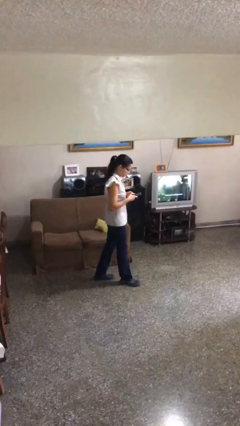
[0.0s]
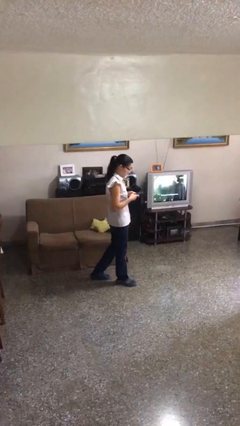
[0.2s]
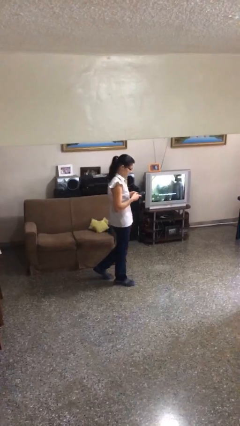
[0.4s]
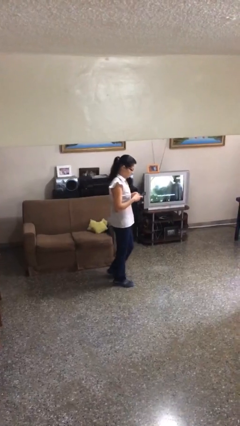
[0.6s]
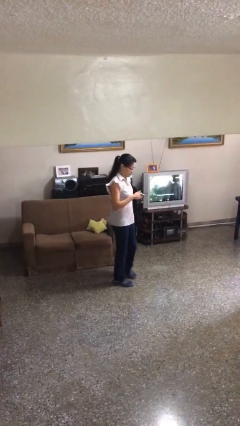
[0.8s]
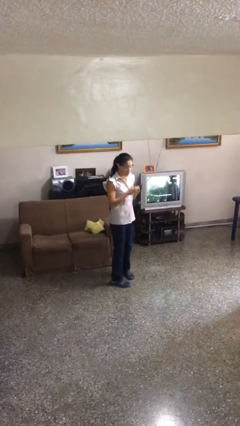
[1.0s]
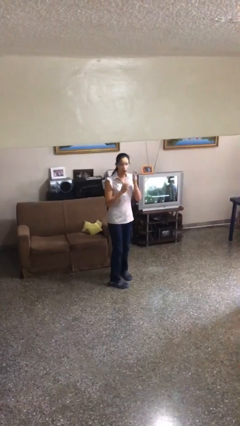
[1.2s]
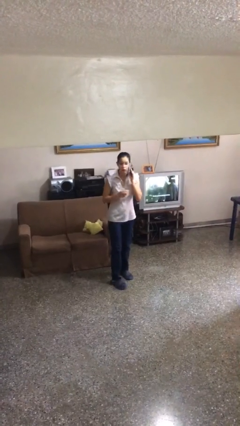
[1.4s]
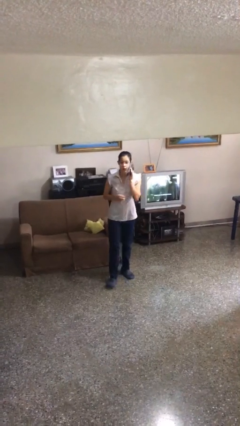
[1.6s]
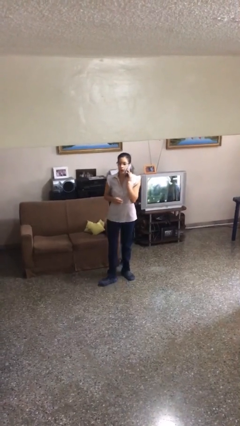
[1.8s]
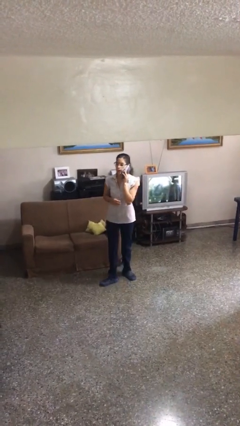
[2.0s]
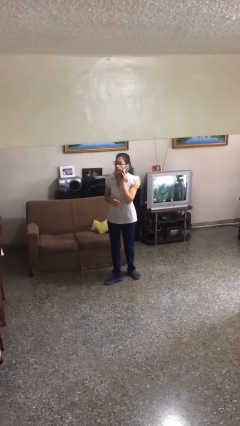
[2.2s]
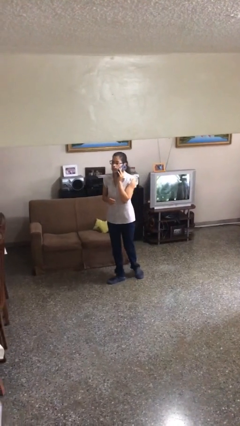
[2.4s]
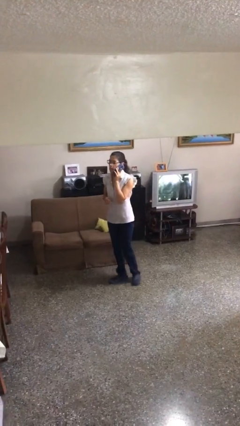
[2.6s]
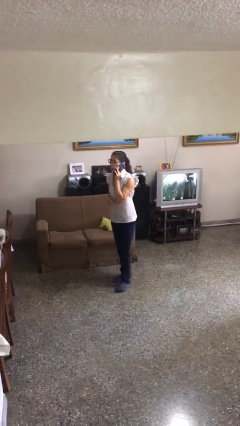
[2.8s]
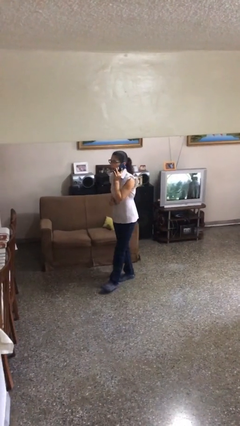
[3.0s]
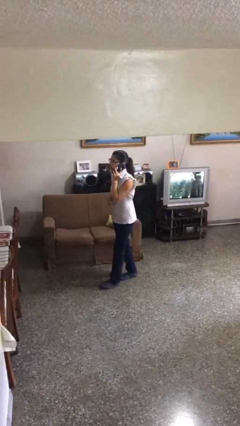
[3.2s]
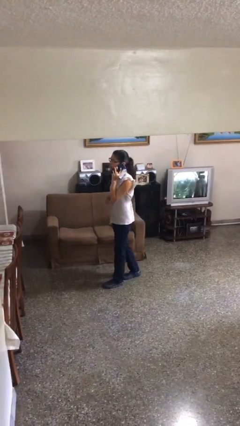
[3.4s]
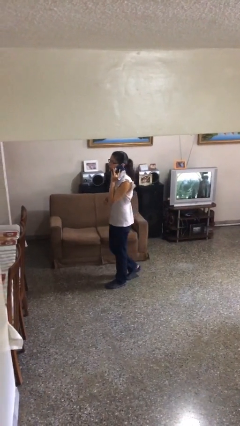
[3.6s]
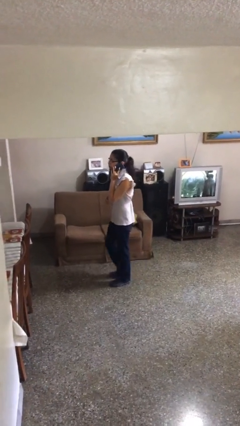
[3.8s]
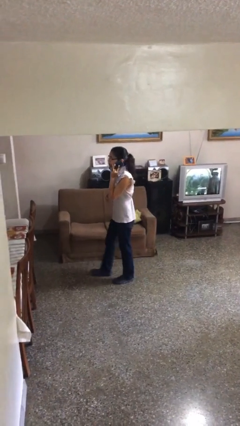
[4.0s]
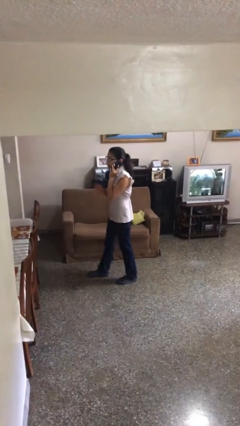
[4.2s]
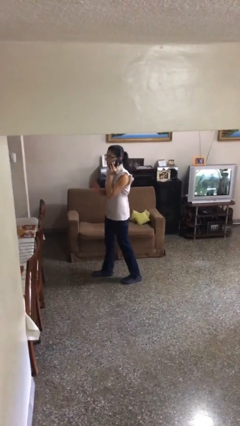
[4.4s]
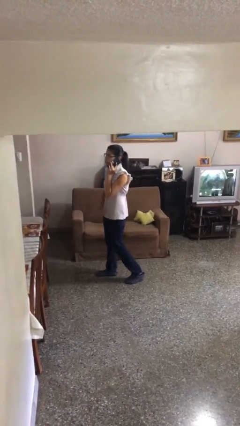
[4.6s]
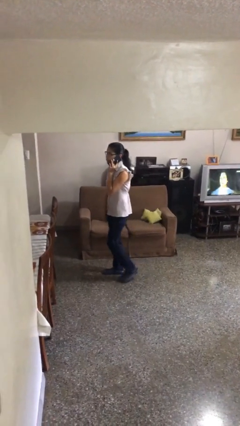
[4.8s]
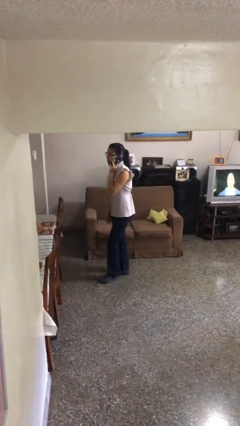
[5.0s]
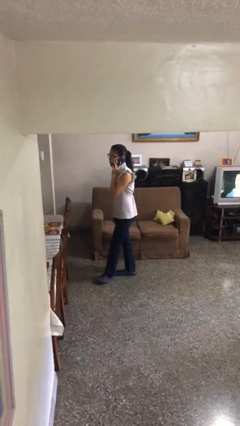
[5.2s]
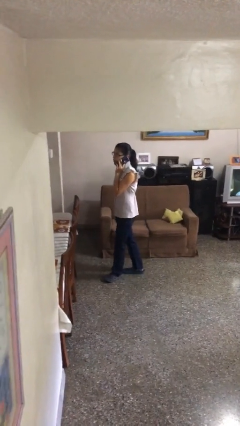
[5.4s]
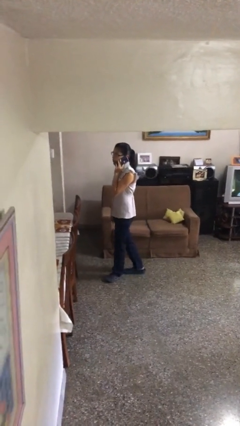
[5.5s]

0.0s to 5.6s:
person talks on phone

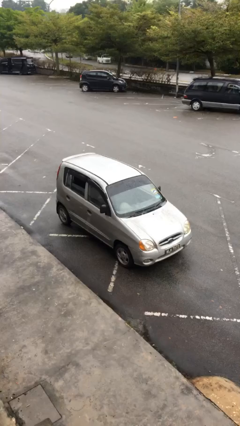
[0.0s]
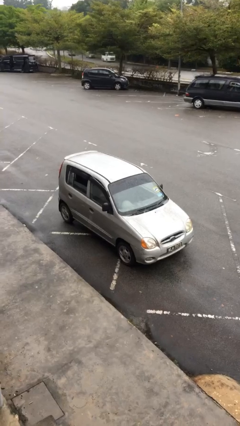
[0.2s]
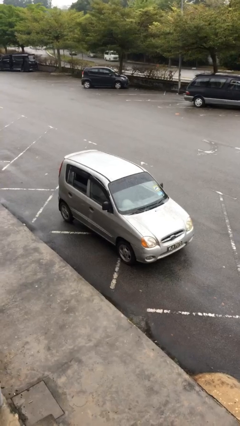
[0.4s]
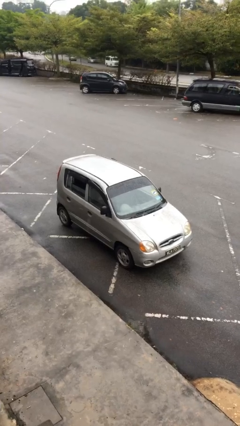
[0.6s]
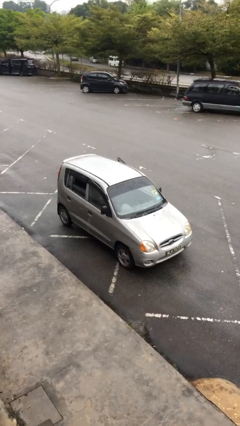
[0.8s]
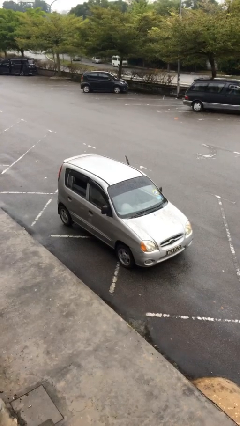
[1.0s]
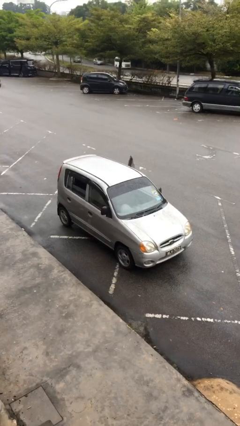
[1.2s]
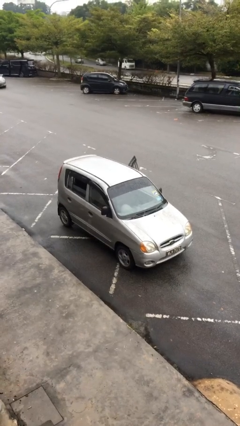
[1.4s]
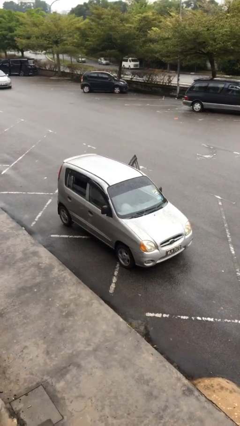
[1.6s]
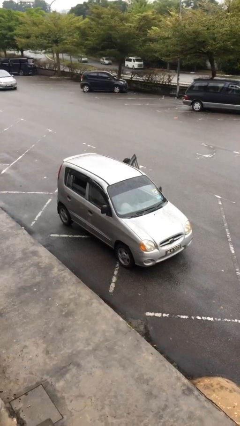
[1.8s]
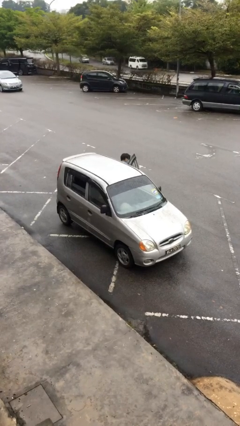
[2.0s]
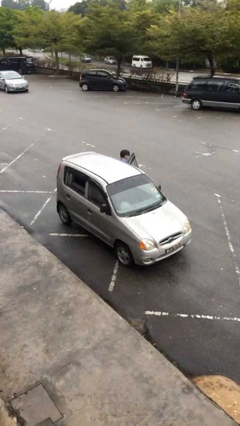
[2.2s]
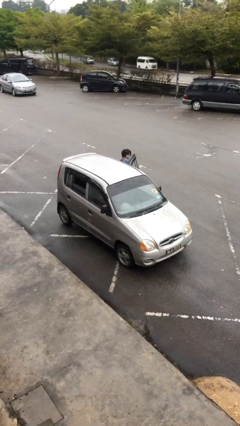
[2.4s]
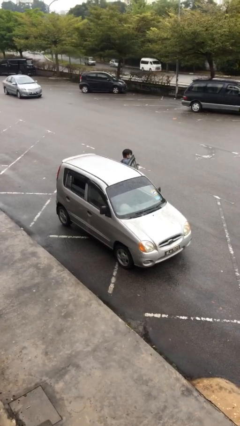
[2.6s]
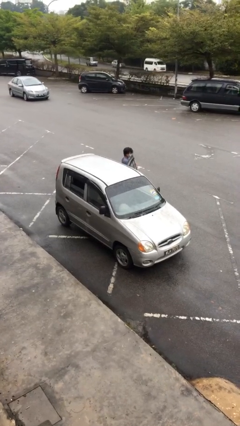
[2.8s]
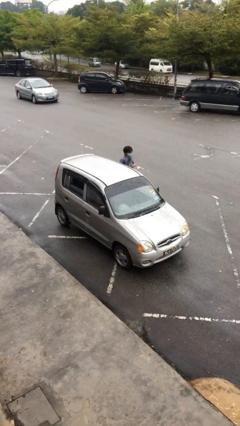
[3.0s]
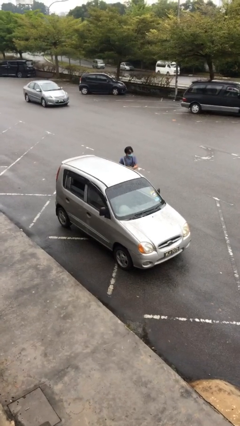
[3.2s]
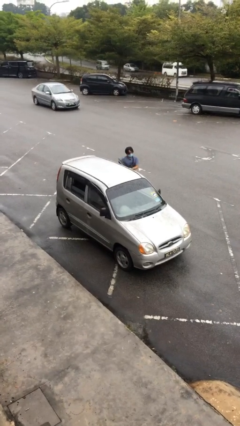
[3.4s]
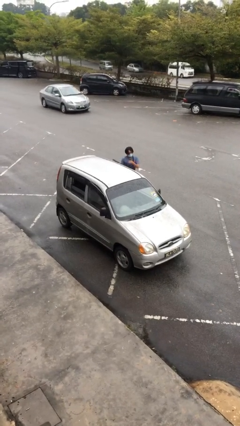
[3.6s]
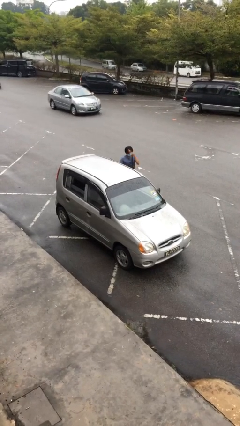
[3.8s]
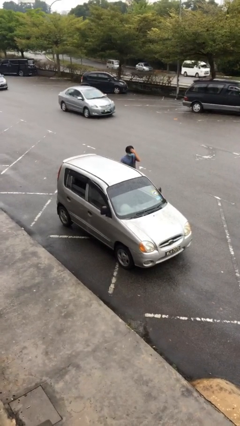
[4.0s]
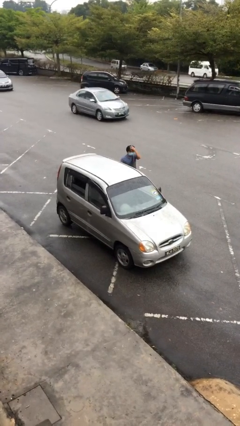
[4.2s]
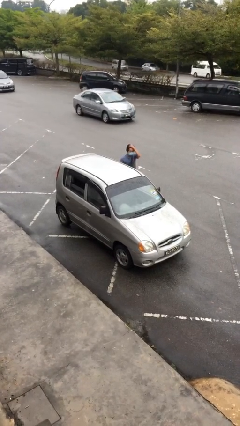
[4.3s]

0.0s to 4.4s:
car drops off person

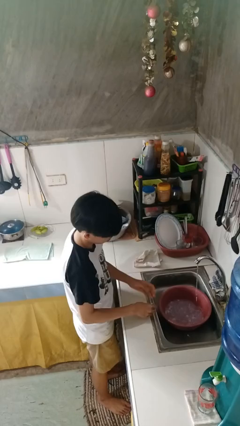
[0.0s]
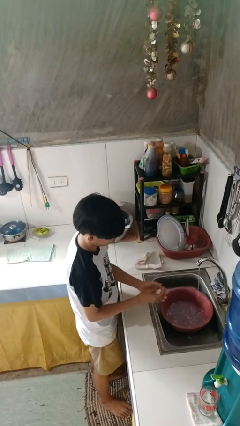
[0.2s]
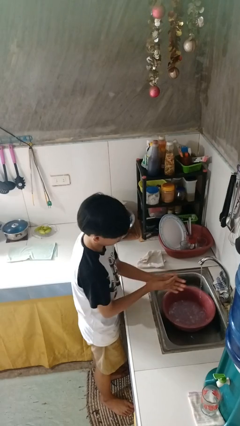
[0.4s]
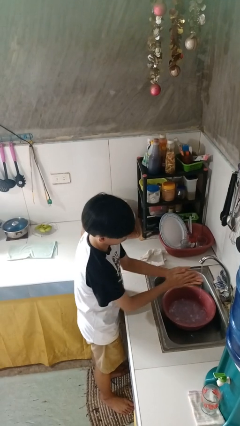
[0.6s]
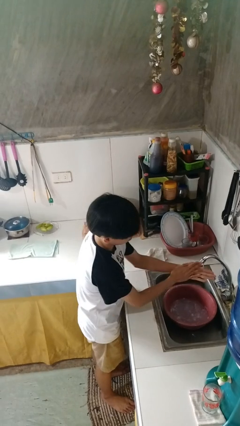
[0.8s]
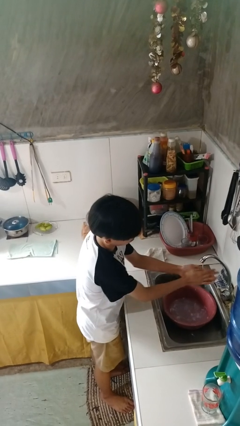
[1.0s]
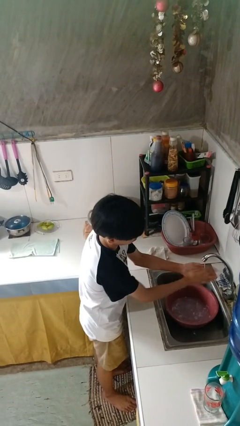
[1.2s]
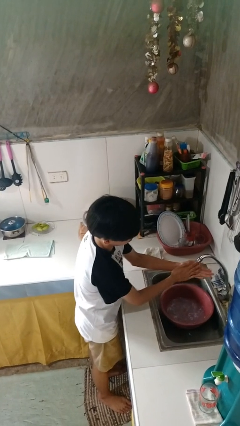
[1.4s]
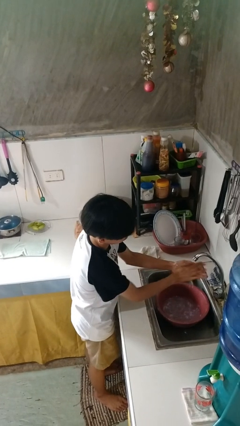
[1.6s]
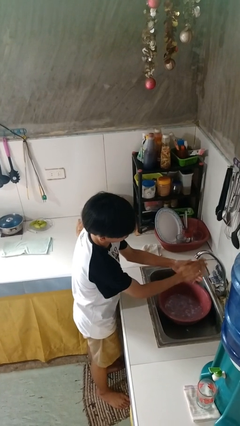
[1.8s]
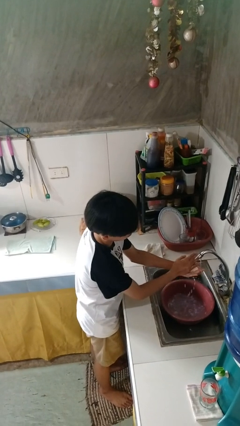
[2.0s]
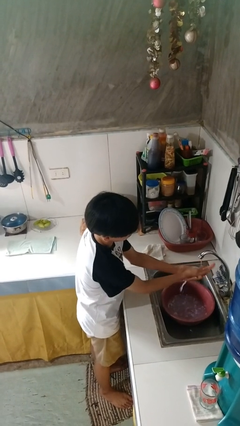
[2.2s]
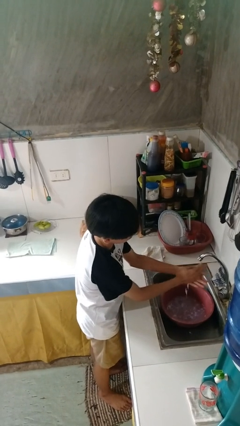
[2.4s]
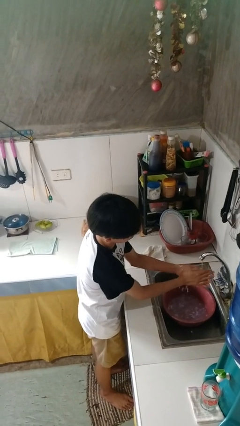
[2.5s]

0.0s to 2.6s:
person washes hands

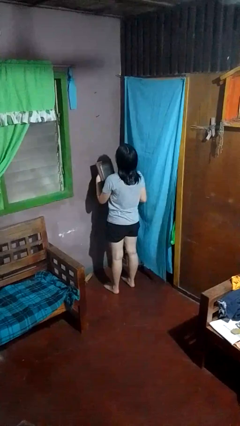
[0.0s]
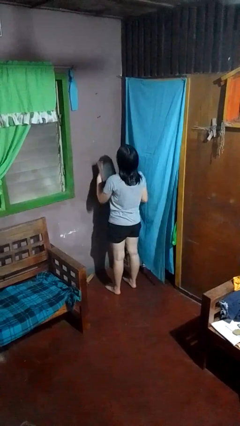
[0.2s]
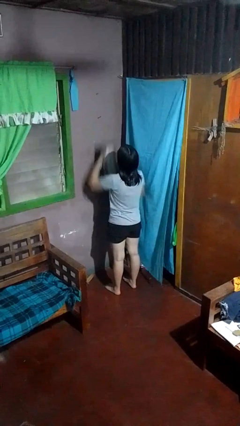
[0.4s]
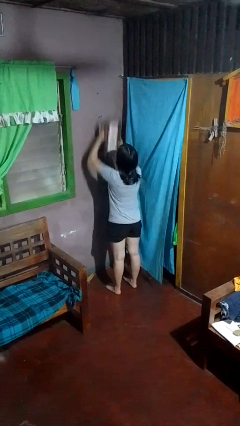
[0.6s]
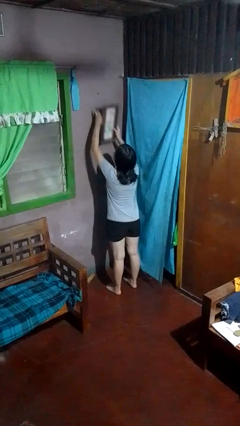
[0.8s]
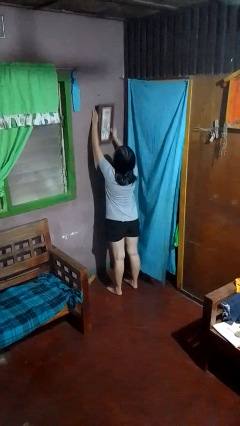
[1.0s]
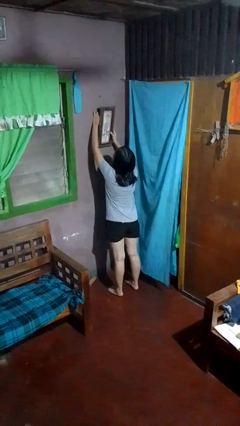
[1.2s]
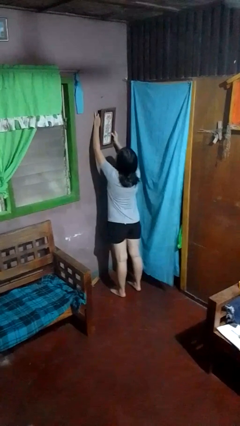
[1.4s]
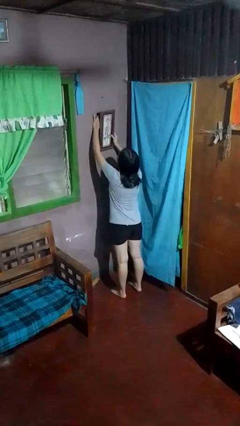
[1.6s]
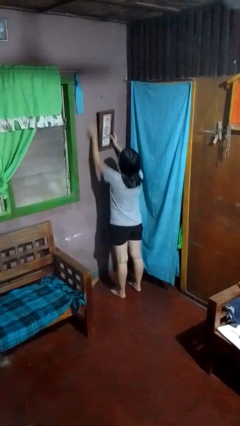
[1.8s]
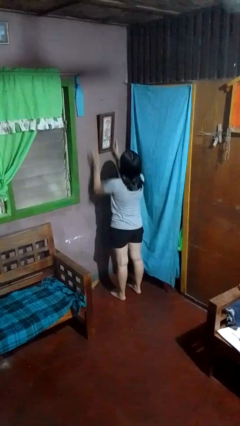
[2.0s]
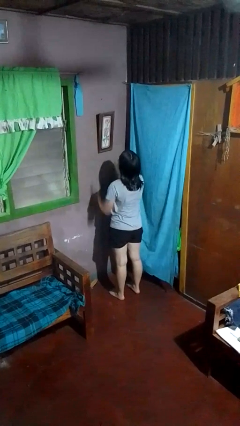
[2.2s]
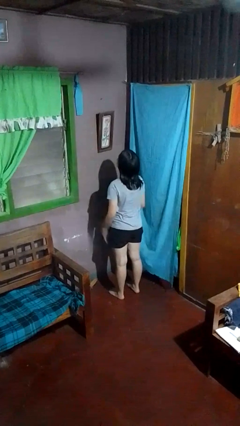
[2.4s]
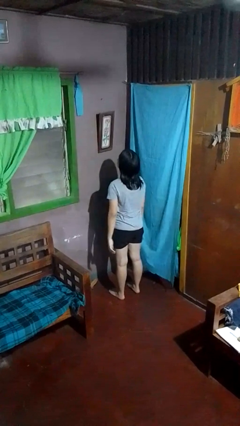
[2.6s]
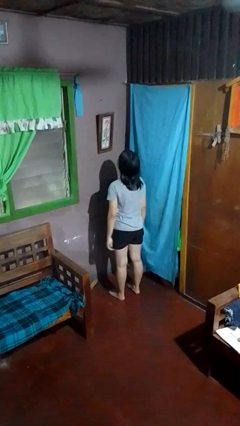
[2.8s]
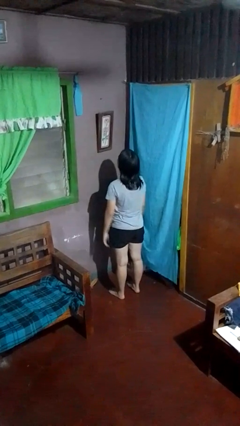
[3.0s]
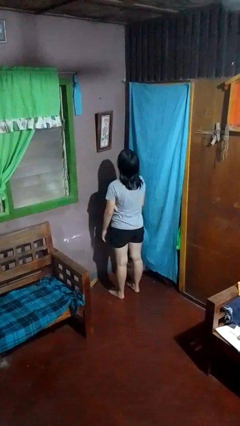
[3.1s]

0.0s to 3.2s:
person puts up picture frame

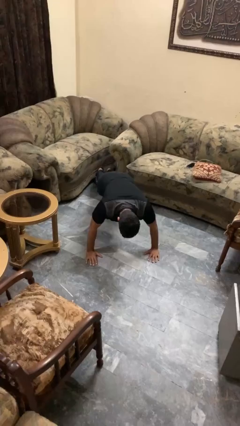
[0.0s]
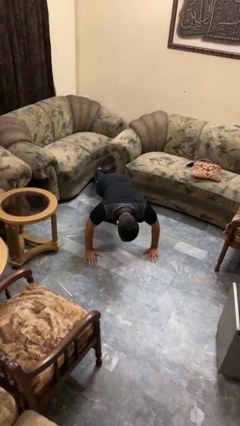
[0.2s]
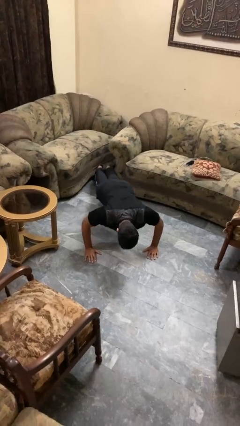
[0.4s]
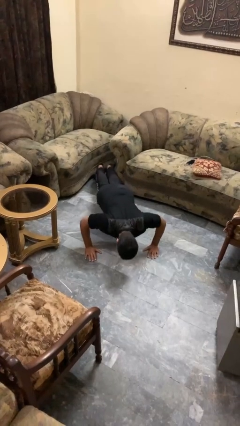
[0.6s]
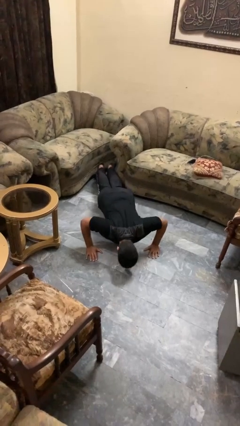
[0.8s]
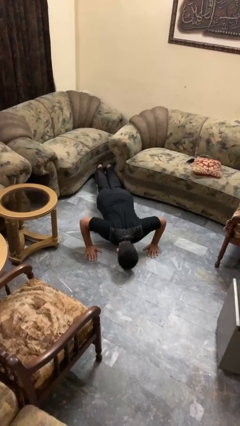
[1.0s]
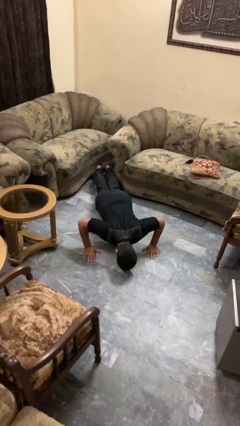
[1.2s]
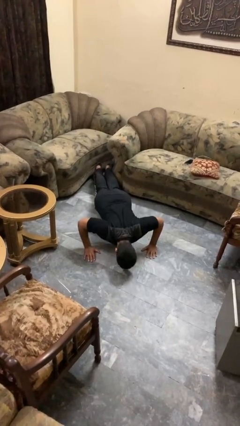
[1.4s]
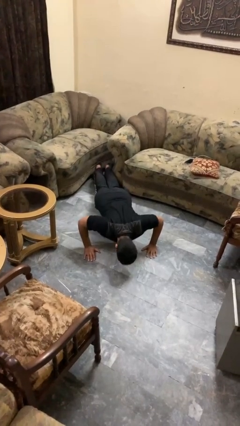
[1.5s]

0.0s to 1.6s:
person exercises with pushup

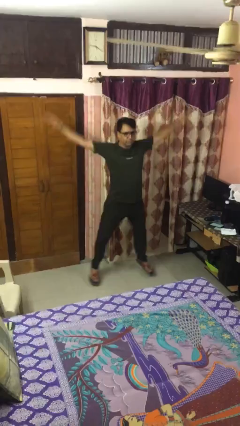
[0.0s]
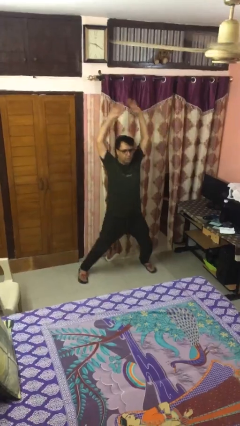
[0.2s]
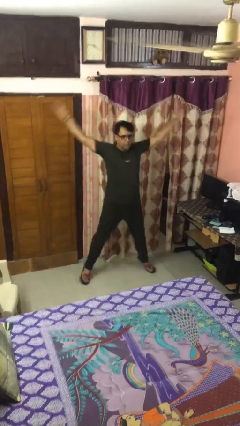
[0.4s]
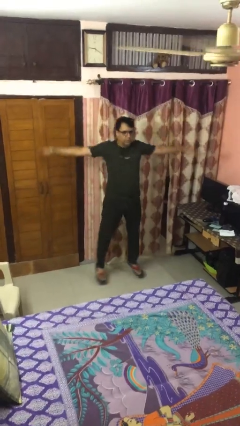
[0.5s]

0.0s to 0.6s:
person exercises with jumping jacks
